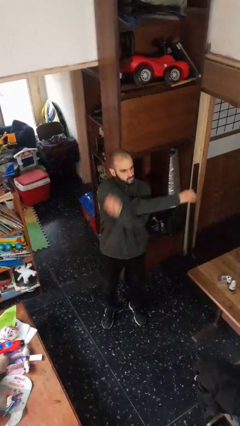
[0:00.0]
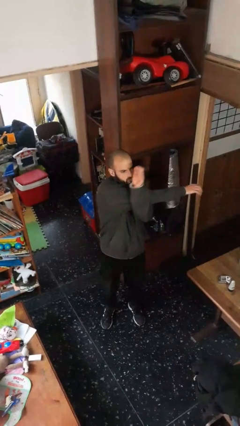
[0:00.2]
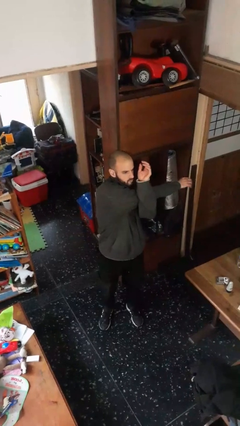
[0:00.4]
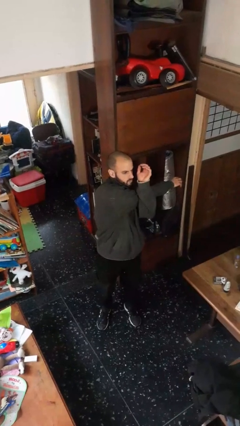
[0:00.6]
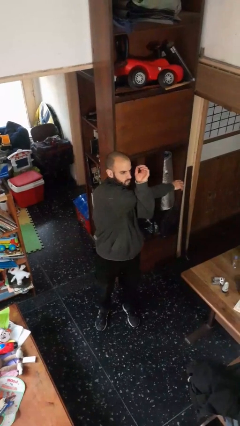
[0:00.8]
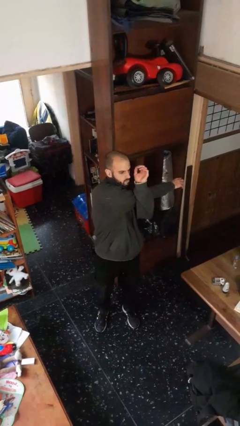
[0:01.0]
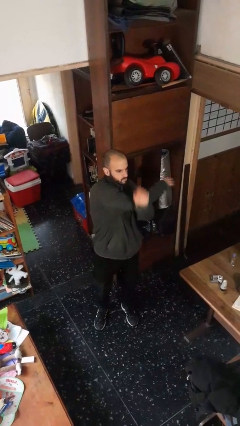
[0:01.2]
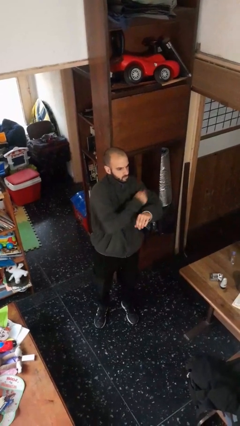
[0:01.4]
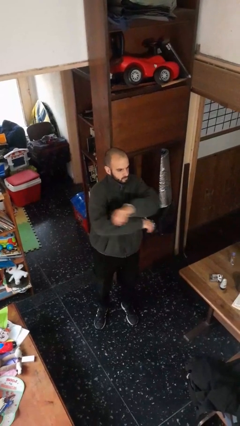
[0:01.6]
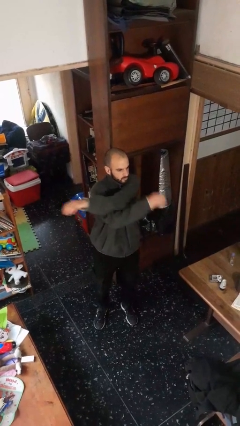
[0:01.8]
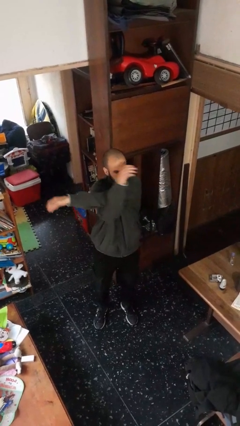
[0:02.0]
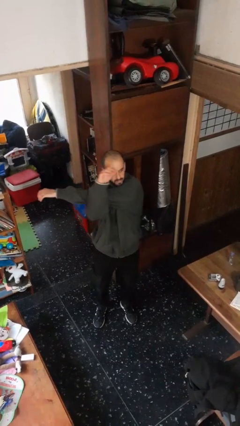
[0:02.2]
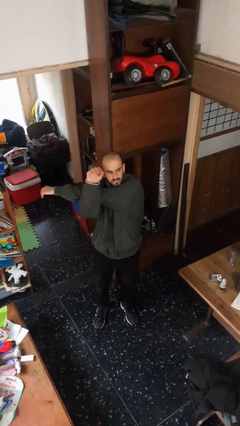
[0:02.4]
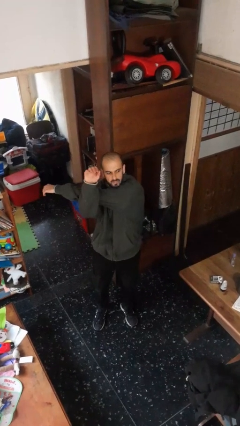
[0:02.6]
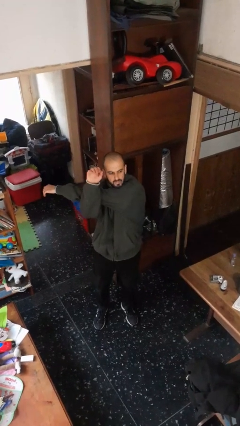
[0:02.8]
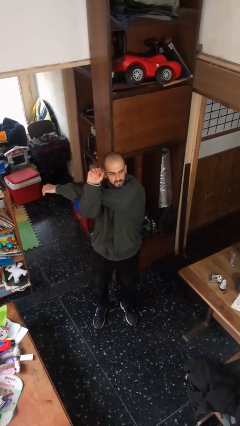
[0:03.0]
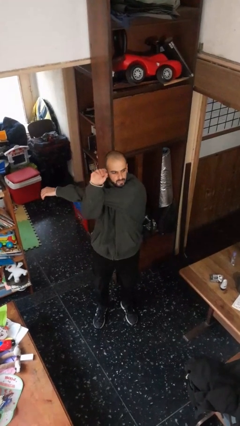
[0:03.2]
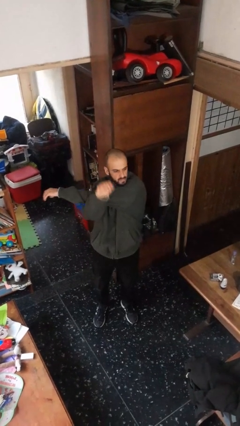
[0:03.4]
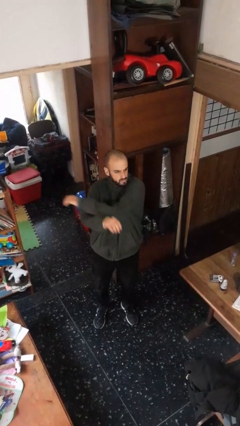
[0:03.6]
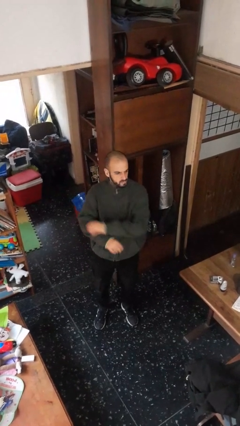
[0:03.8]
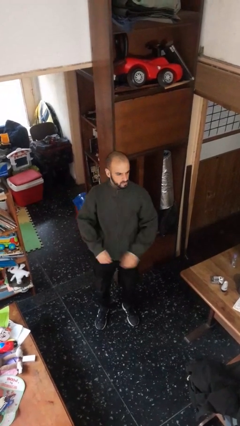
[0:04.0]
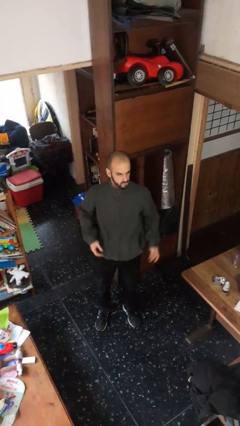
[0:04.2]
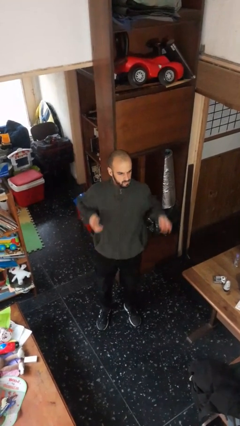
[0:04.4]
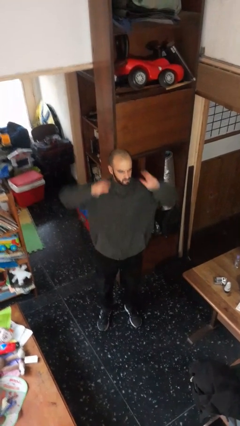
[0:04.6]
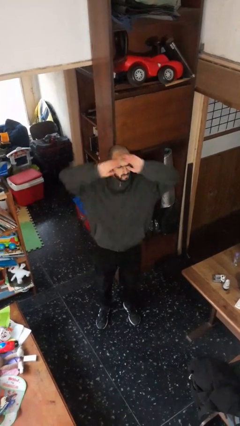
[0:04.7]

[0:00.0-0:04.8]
person stretches arms to side

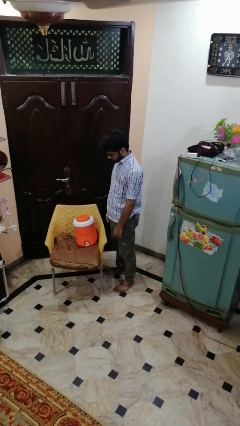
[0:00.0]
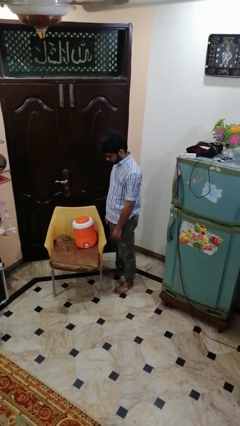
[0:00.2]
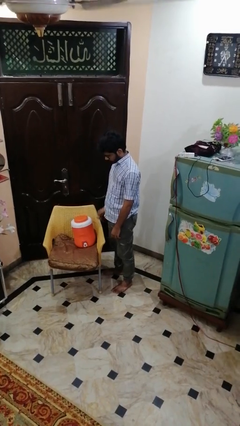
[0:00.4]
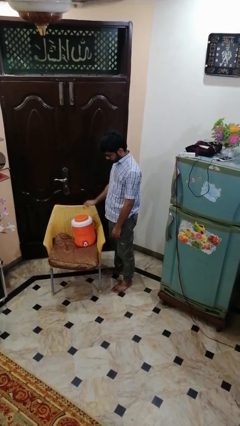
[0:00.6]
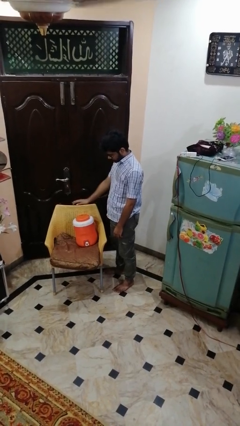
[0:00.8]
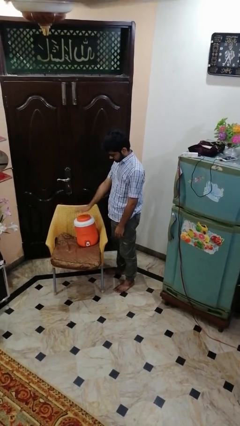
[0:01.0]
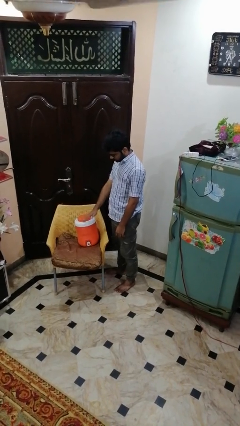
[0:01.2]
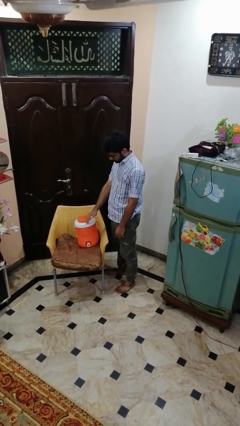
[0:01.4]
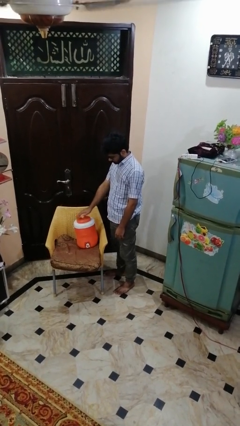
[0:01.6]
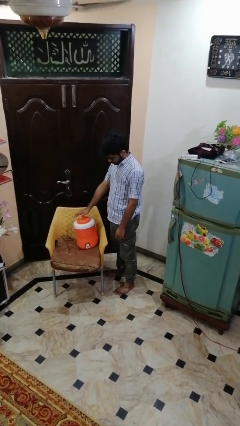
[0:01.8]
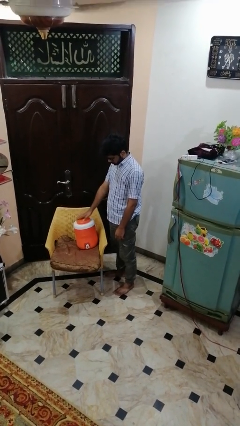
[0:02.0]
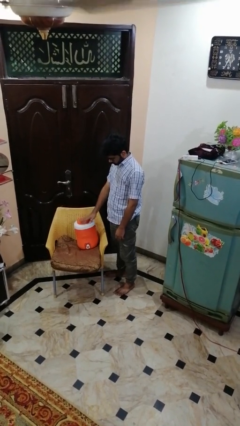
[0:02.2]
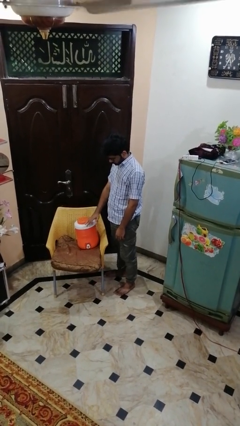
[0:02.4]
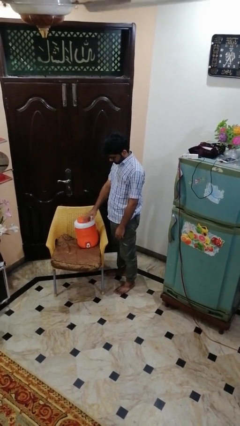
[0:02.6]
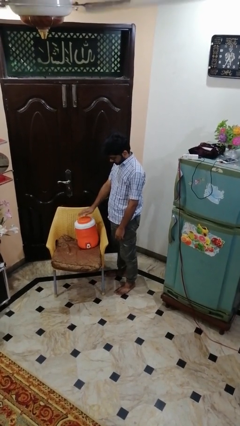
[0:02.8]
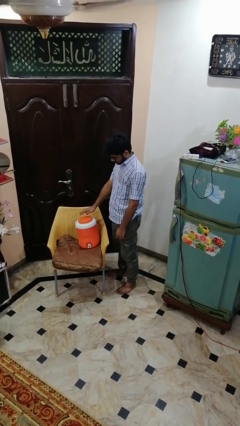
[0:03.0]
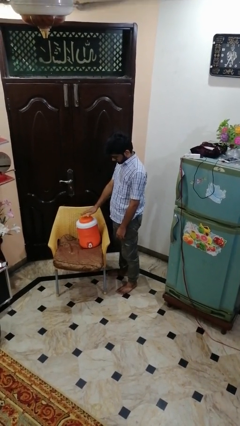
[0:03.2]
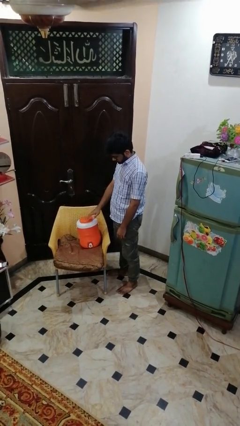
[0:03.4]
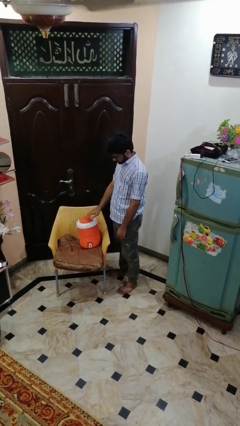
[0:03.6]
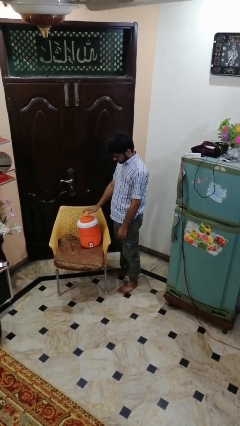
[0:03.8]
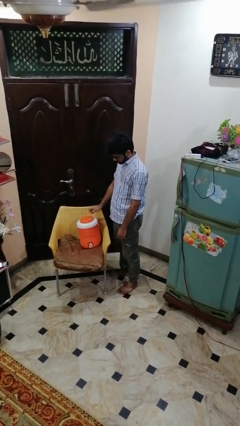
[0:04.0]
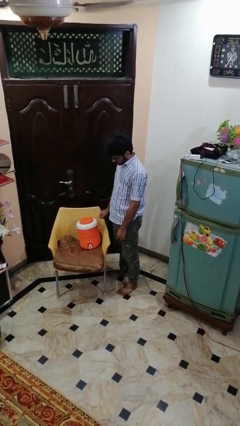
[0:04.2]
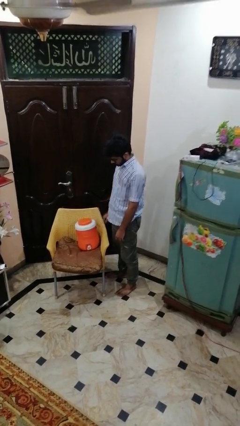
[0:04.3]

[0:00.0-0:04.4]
person waves hand over object

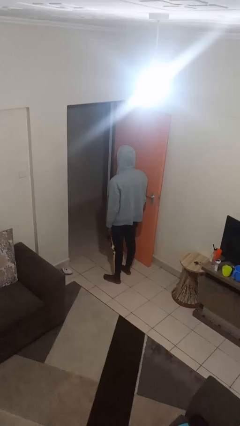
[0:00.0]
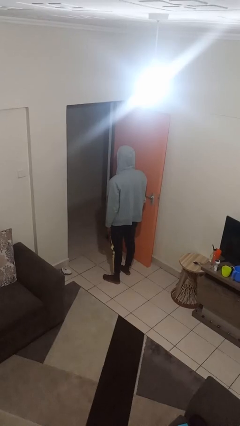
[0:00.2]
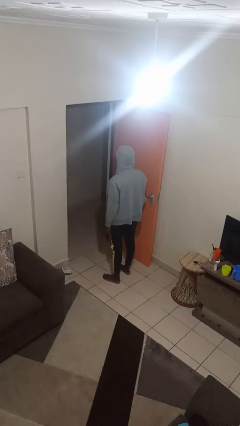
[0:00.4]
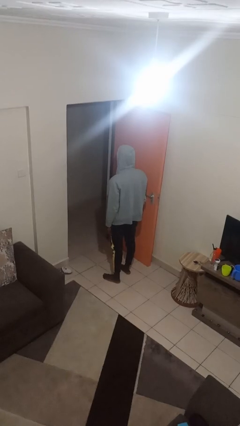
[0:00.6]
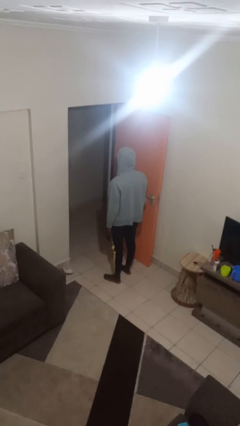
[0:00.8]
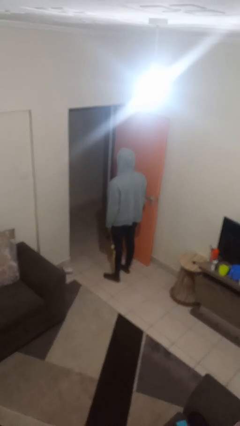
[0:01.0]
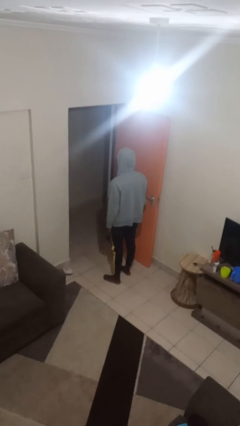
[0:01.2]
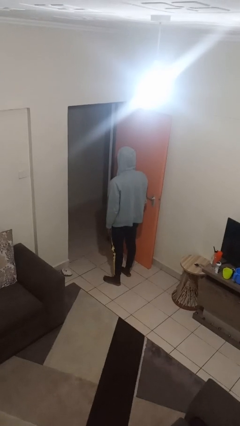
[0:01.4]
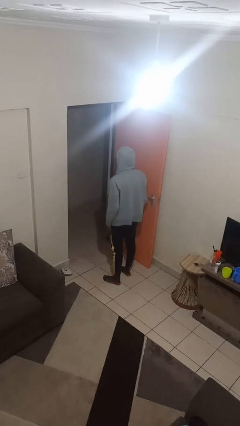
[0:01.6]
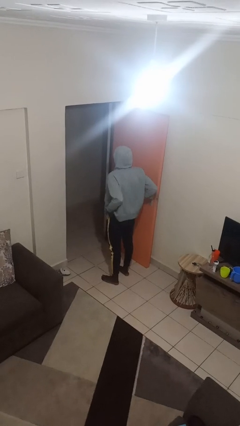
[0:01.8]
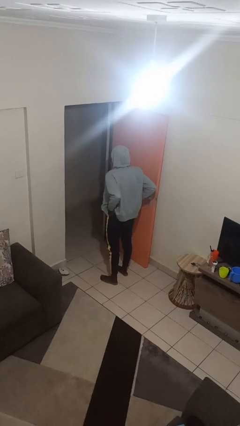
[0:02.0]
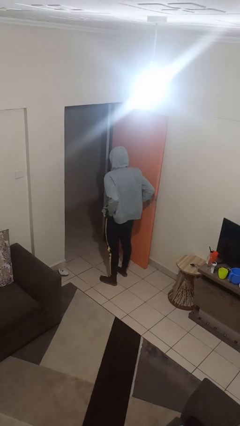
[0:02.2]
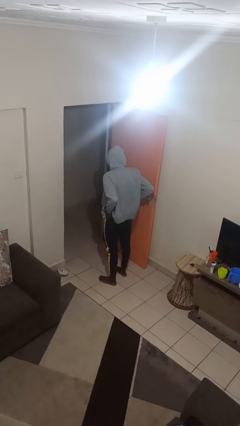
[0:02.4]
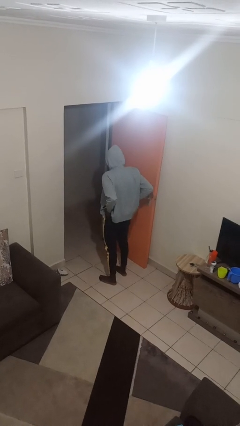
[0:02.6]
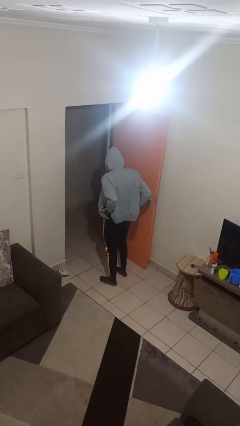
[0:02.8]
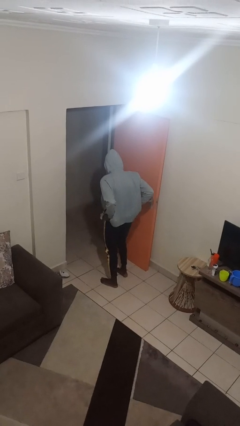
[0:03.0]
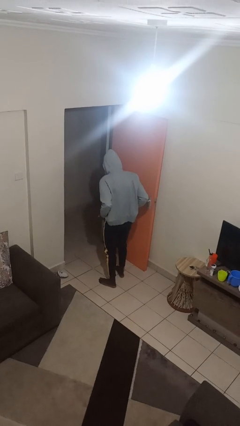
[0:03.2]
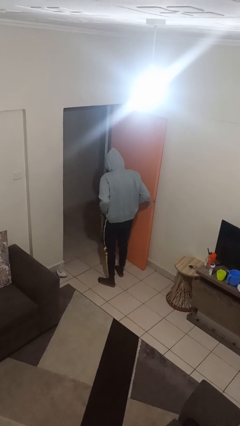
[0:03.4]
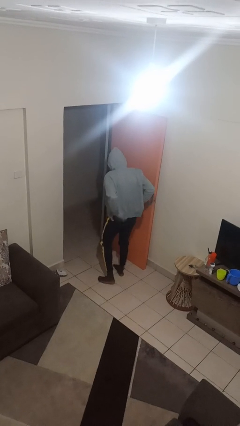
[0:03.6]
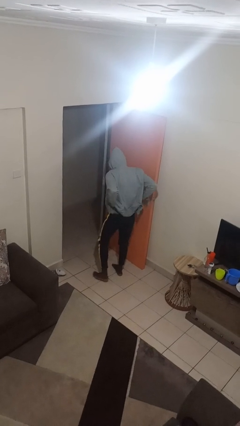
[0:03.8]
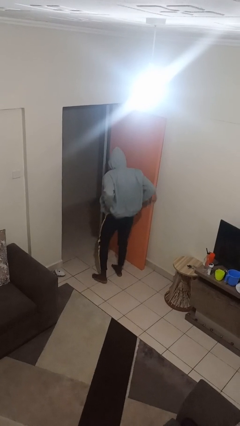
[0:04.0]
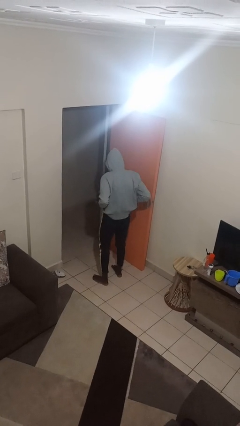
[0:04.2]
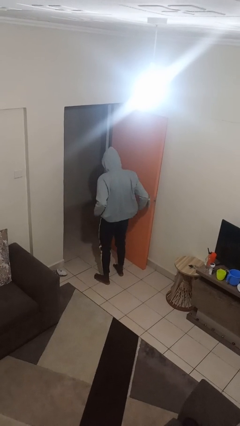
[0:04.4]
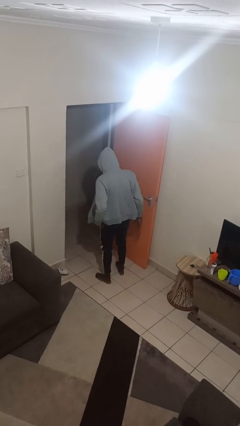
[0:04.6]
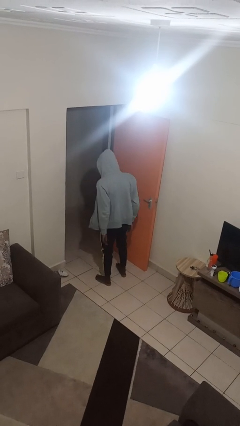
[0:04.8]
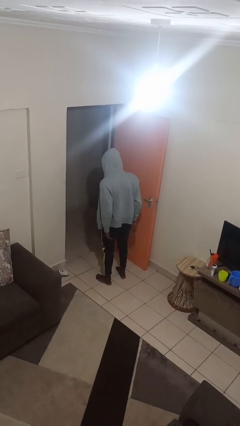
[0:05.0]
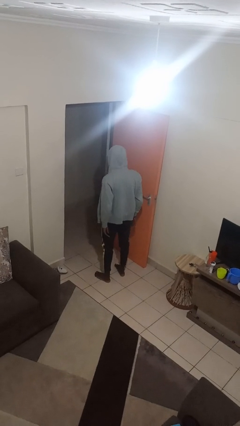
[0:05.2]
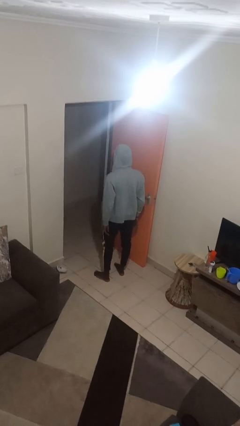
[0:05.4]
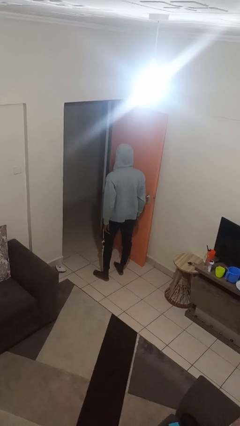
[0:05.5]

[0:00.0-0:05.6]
person hikes up pants

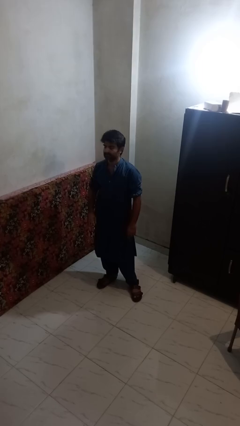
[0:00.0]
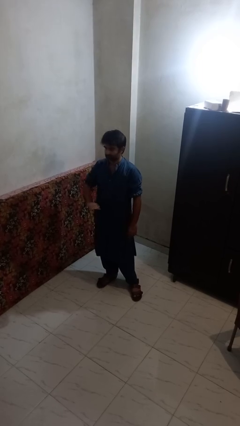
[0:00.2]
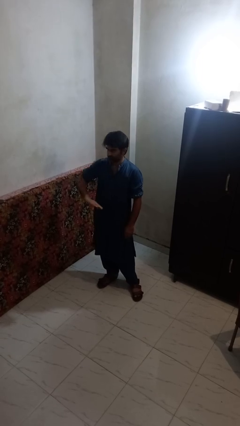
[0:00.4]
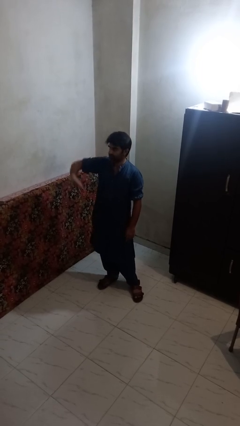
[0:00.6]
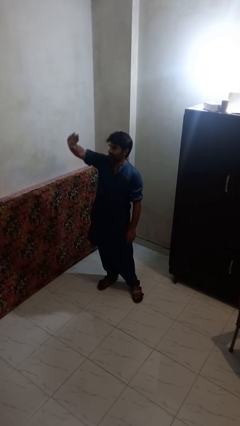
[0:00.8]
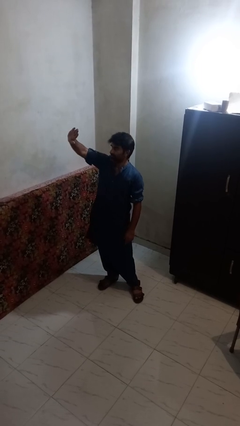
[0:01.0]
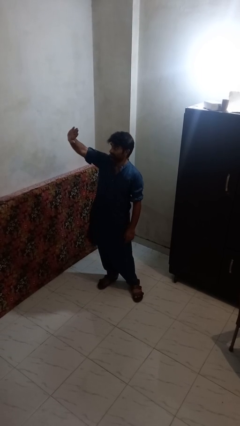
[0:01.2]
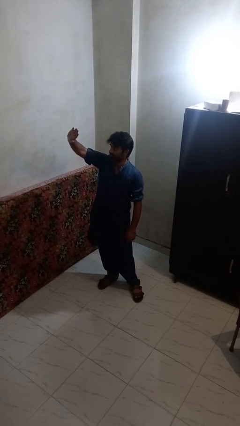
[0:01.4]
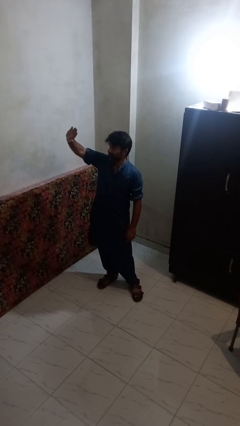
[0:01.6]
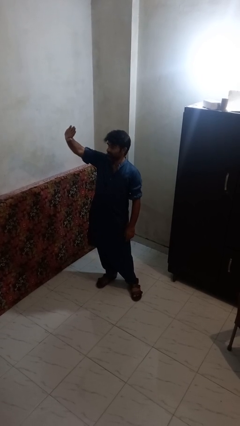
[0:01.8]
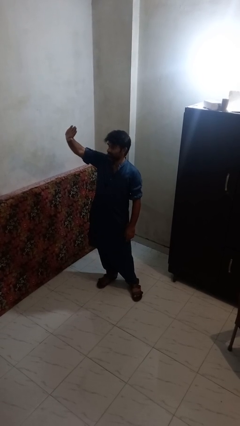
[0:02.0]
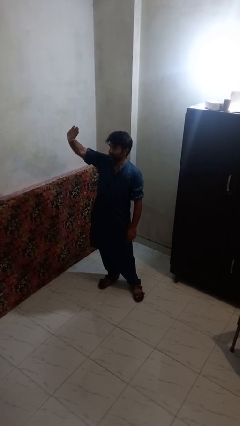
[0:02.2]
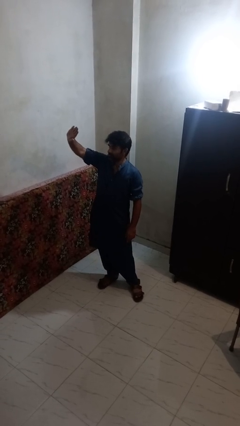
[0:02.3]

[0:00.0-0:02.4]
person gestures swipe up

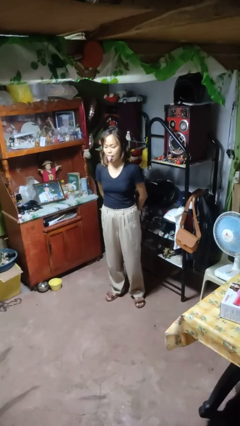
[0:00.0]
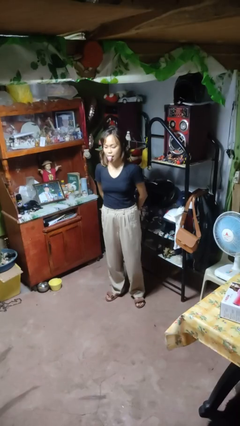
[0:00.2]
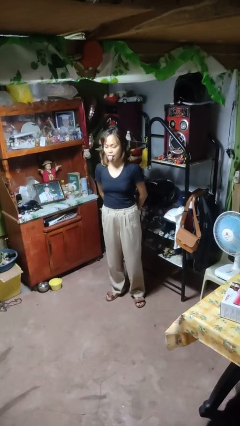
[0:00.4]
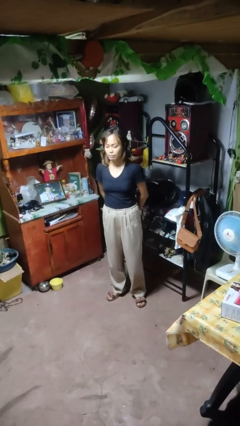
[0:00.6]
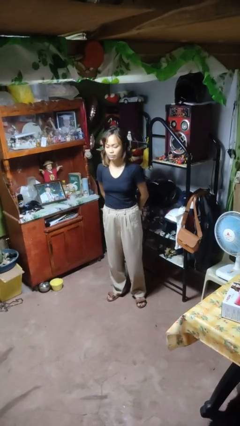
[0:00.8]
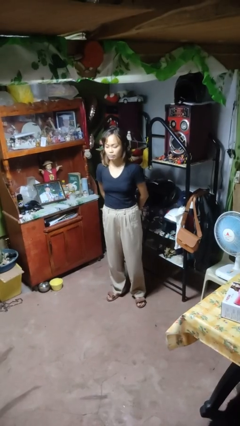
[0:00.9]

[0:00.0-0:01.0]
person sticks out tongue
